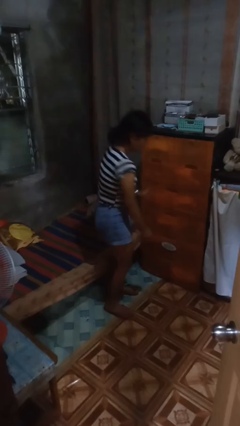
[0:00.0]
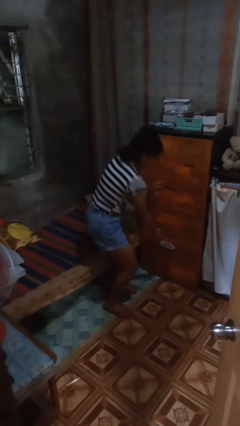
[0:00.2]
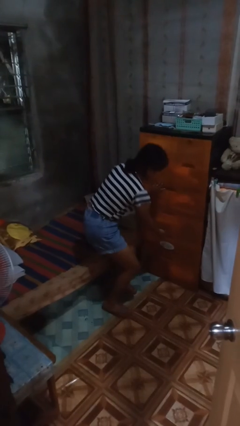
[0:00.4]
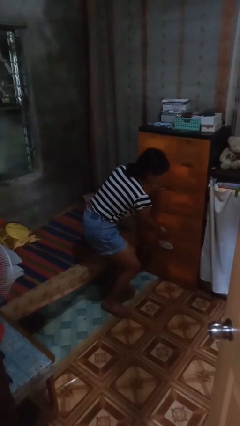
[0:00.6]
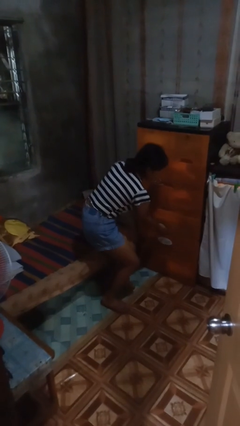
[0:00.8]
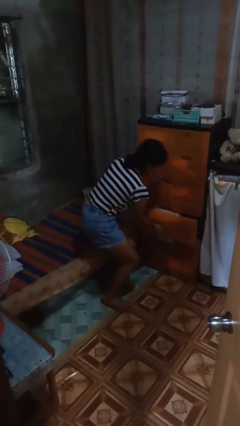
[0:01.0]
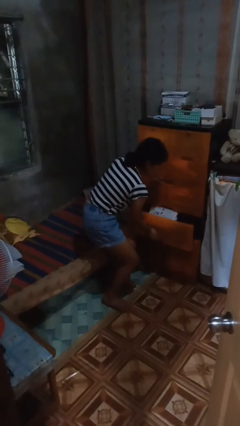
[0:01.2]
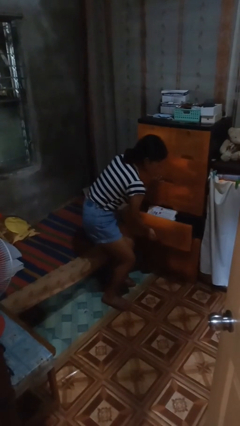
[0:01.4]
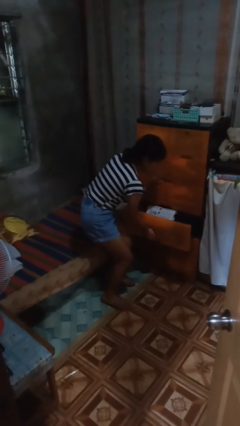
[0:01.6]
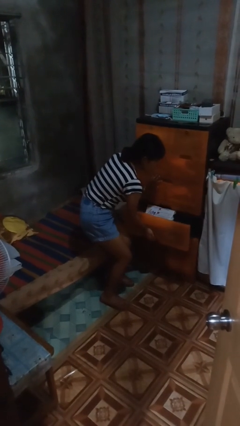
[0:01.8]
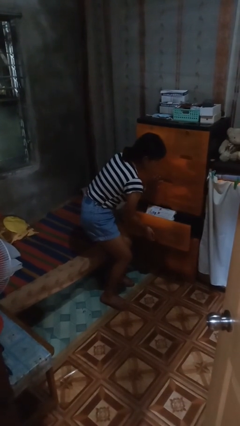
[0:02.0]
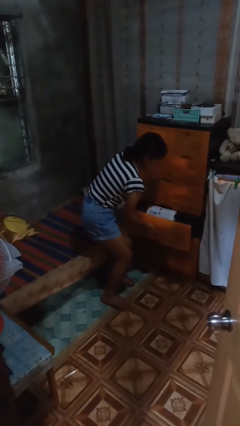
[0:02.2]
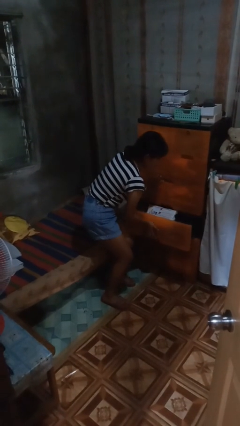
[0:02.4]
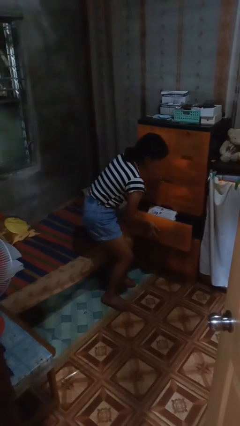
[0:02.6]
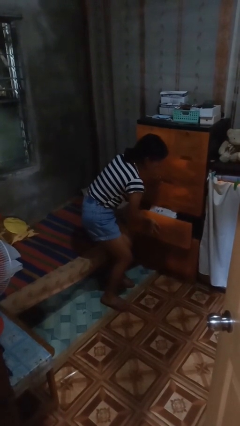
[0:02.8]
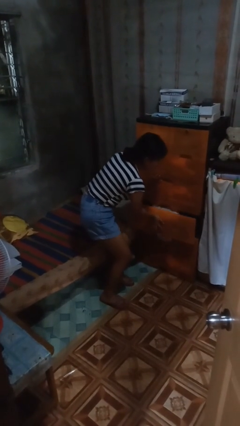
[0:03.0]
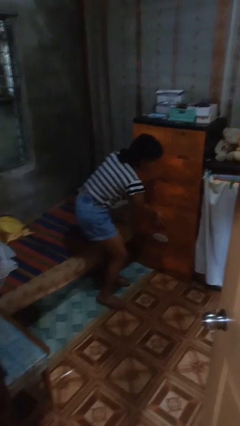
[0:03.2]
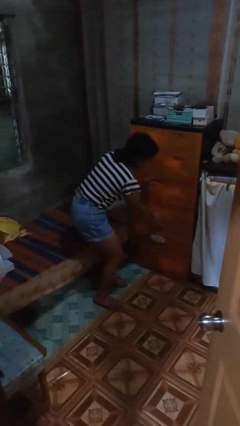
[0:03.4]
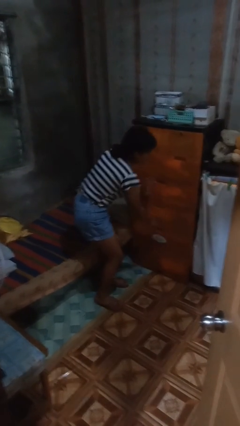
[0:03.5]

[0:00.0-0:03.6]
person opens dresser drawer

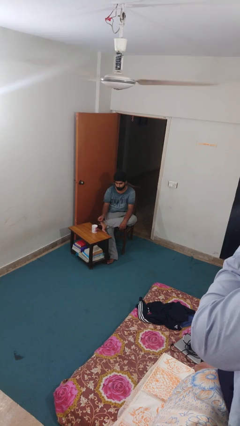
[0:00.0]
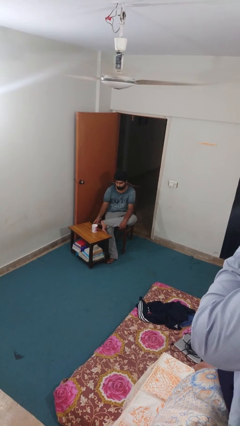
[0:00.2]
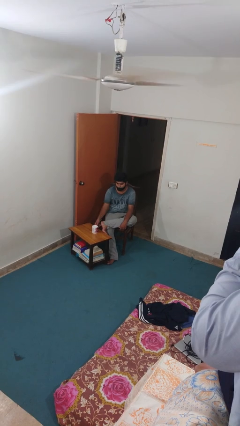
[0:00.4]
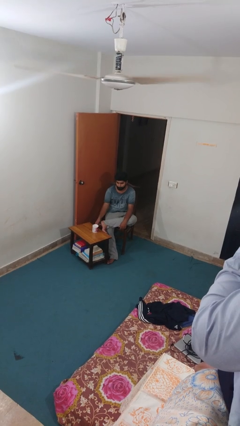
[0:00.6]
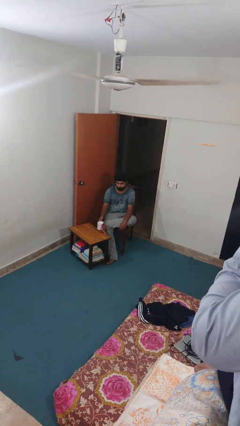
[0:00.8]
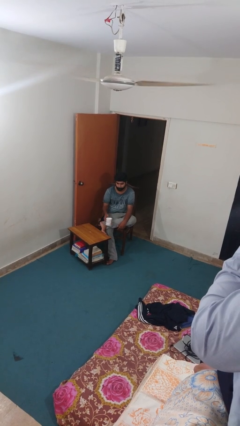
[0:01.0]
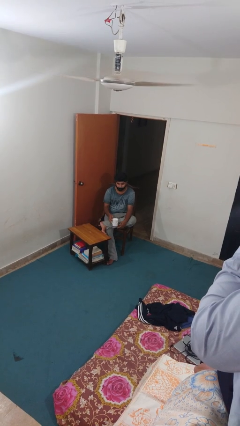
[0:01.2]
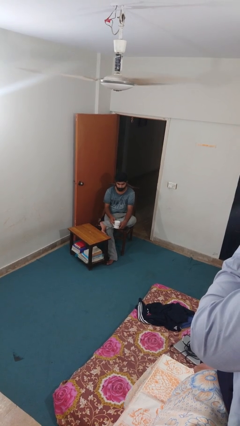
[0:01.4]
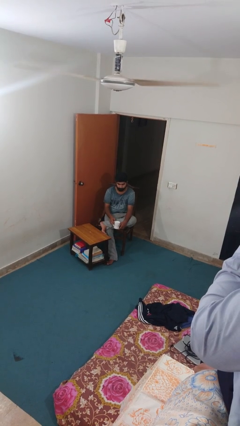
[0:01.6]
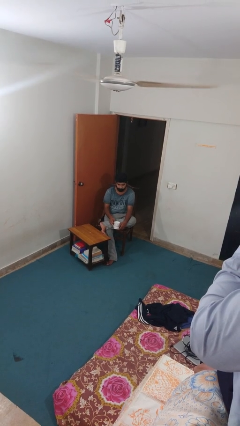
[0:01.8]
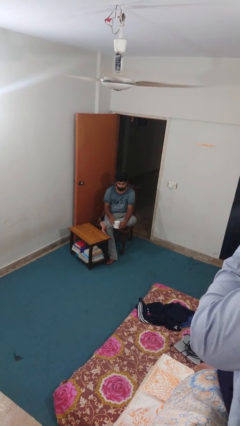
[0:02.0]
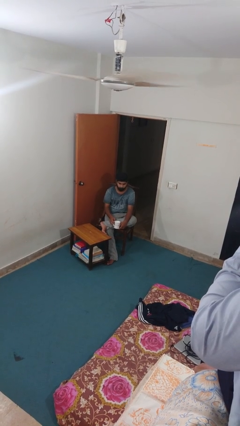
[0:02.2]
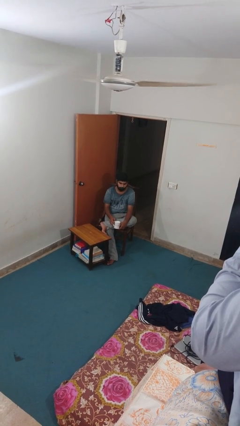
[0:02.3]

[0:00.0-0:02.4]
person picks up object from table

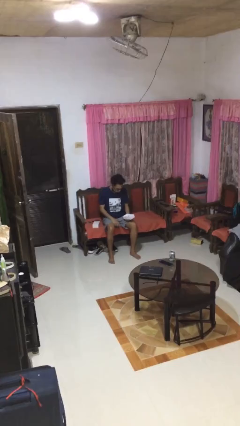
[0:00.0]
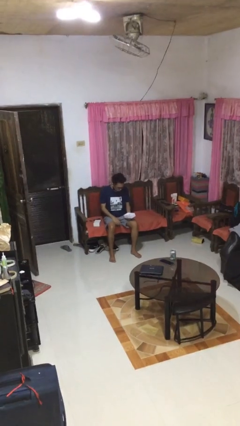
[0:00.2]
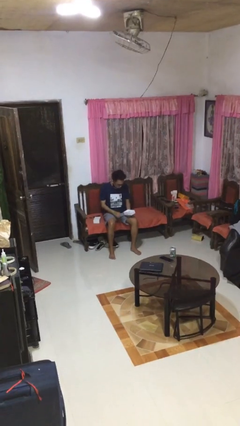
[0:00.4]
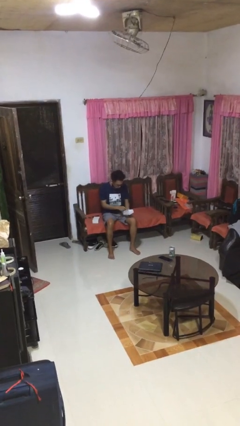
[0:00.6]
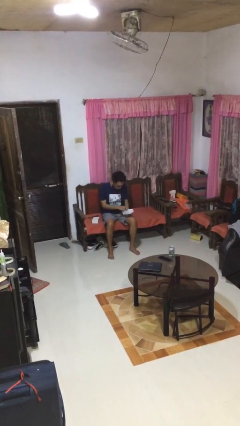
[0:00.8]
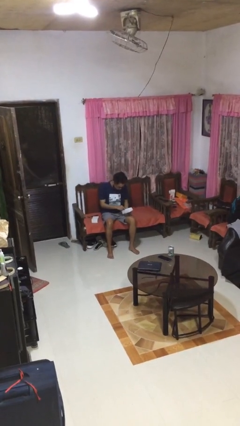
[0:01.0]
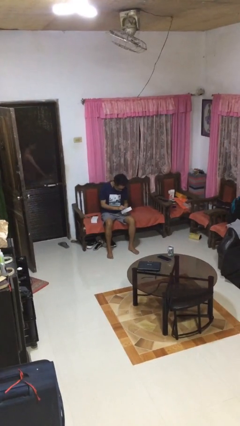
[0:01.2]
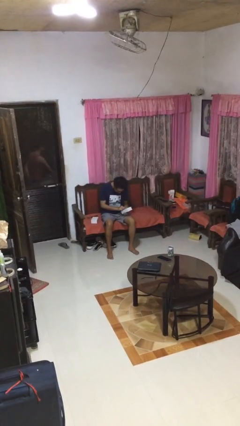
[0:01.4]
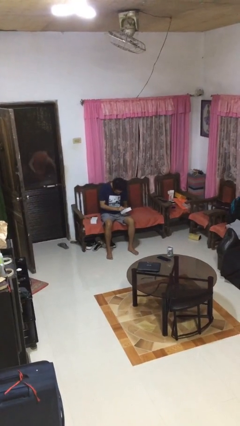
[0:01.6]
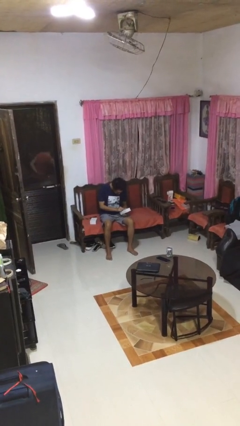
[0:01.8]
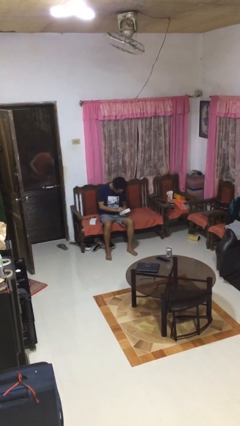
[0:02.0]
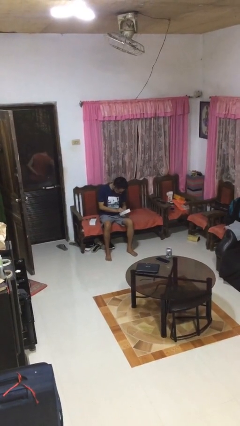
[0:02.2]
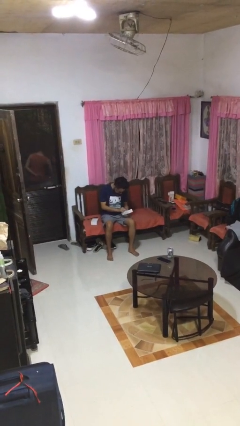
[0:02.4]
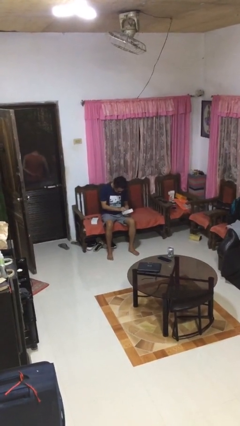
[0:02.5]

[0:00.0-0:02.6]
person searches jewelry box

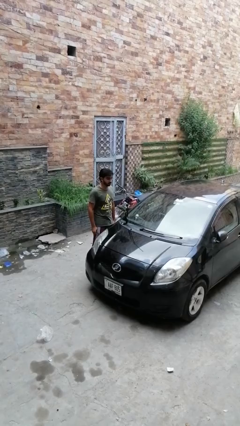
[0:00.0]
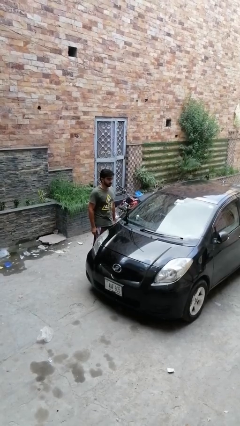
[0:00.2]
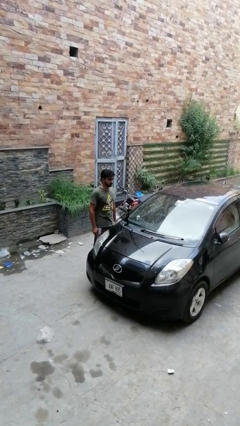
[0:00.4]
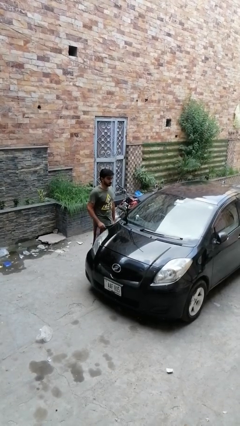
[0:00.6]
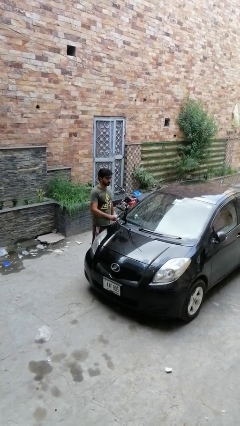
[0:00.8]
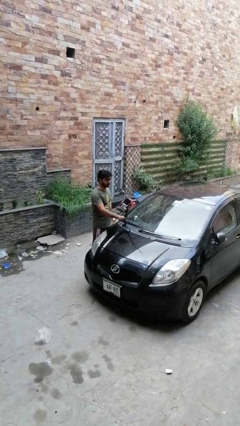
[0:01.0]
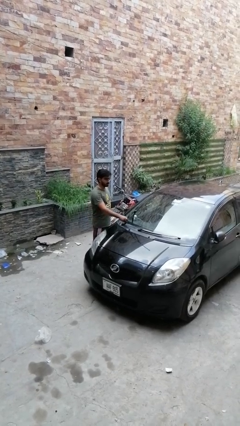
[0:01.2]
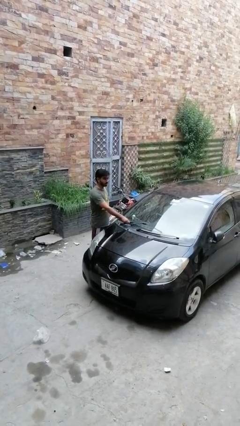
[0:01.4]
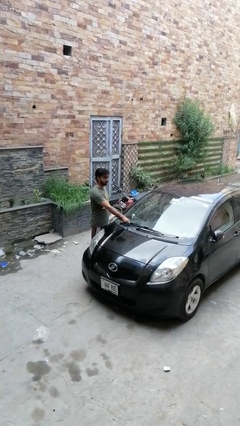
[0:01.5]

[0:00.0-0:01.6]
person flips down car wipers

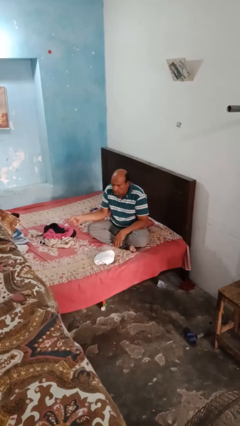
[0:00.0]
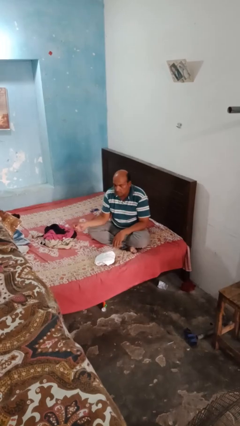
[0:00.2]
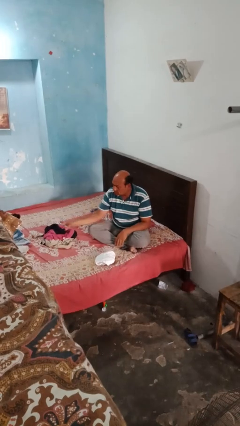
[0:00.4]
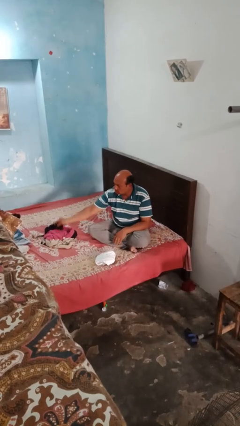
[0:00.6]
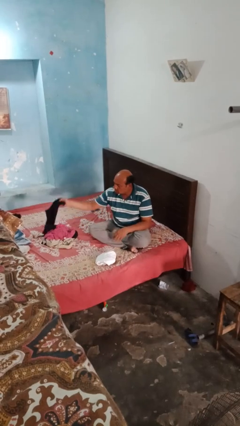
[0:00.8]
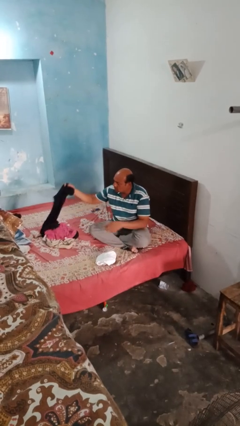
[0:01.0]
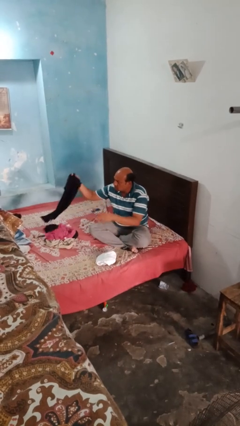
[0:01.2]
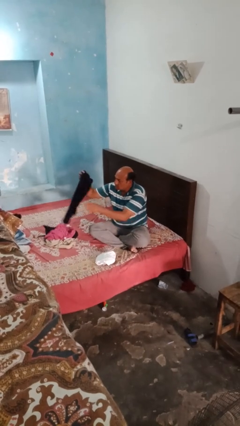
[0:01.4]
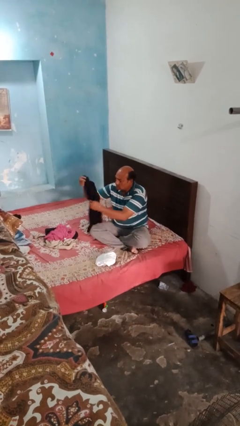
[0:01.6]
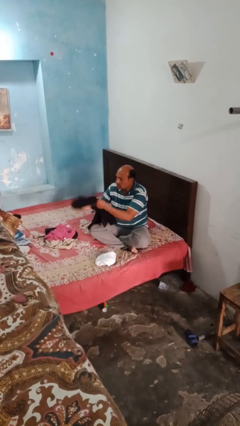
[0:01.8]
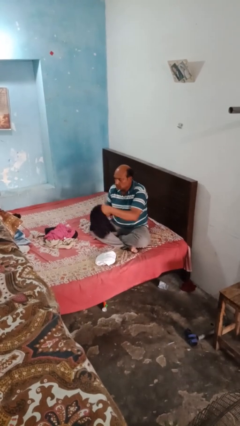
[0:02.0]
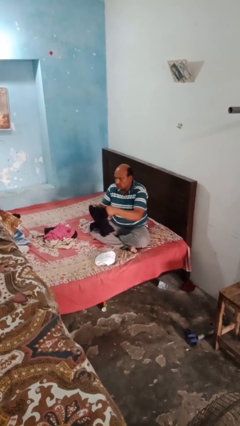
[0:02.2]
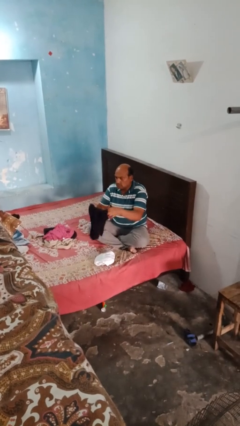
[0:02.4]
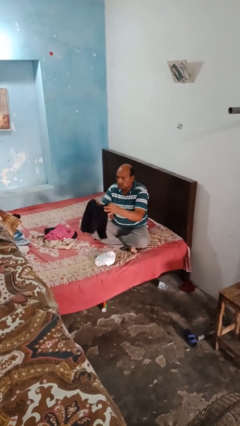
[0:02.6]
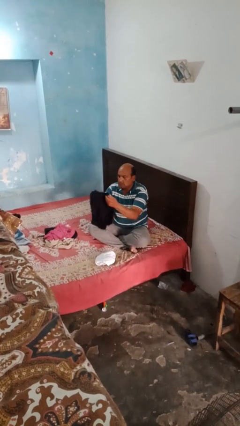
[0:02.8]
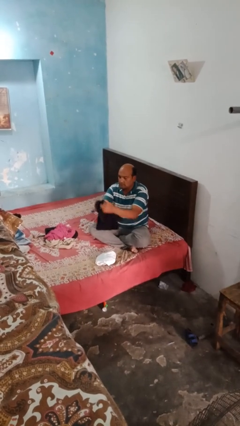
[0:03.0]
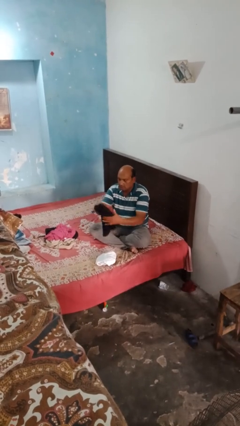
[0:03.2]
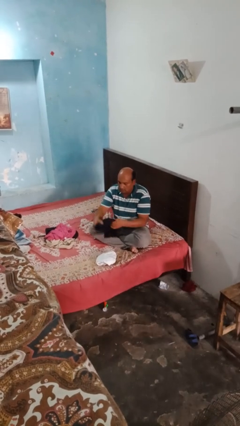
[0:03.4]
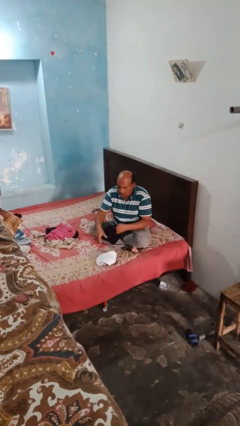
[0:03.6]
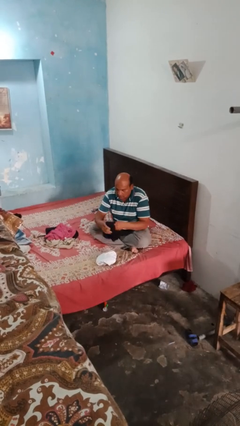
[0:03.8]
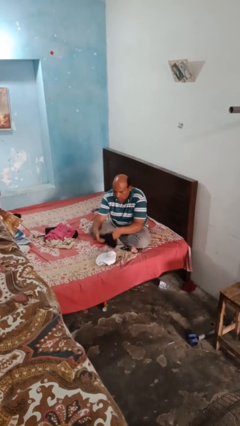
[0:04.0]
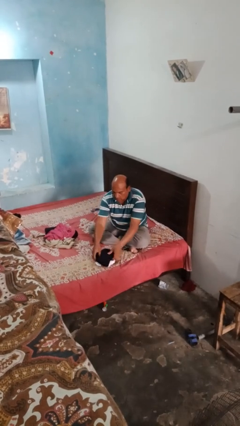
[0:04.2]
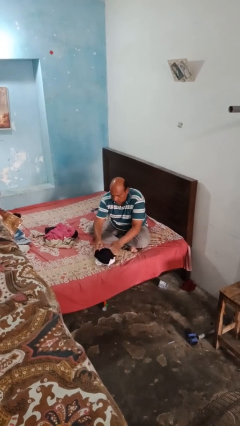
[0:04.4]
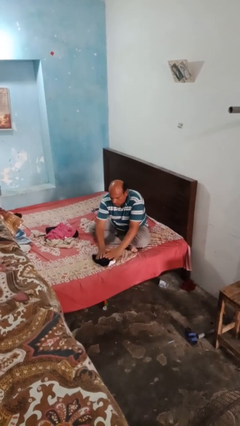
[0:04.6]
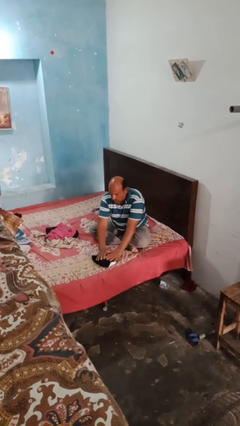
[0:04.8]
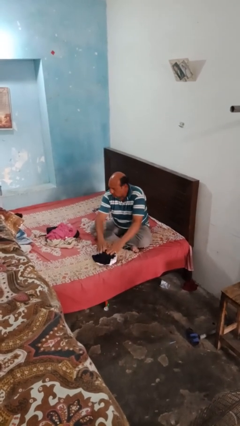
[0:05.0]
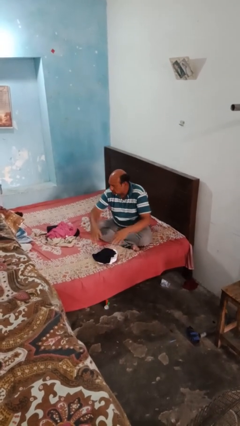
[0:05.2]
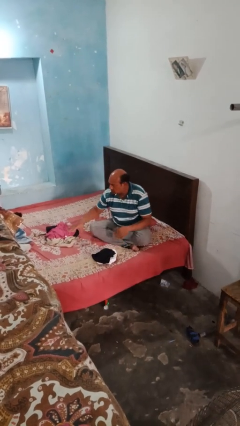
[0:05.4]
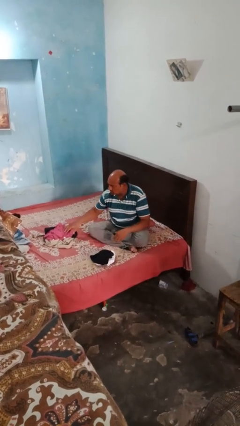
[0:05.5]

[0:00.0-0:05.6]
person folds shirt

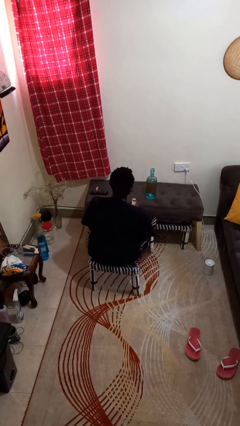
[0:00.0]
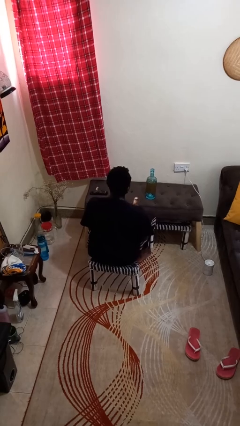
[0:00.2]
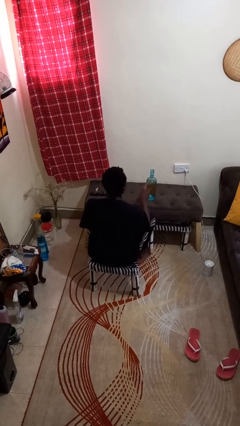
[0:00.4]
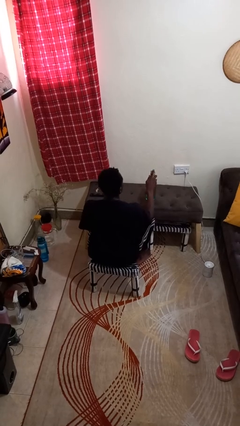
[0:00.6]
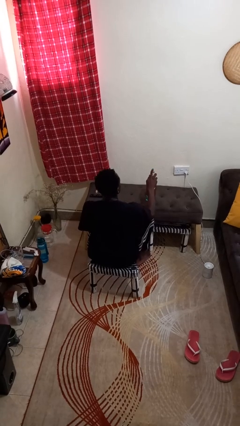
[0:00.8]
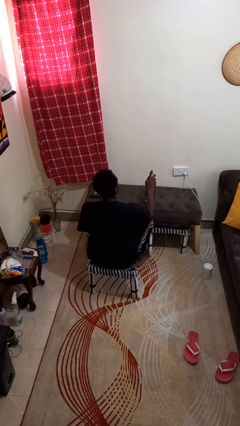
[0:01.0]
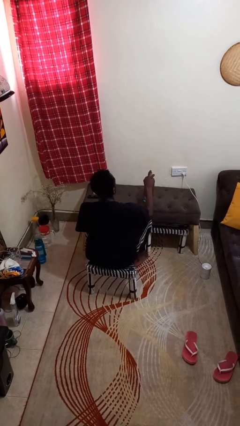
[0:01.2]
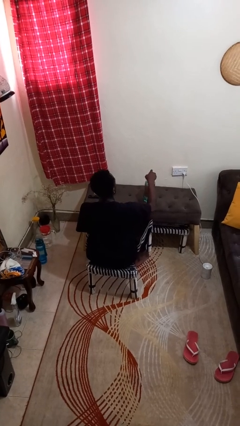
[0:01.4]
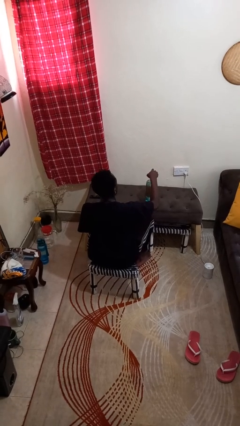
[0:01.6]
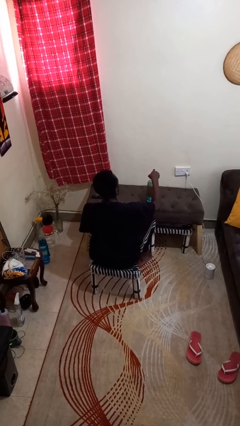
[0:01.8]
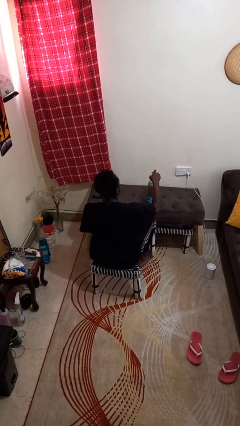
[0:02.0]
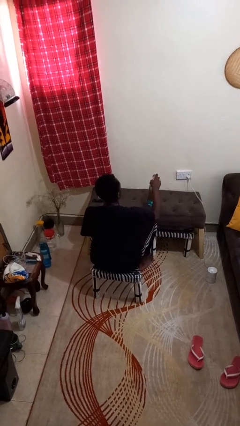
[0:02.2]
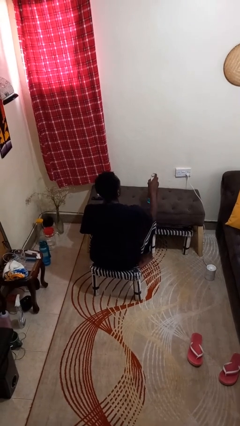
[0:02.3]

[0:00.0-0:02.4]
person opens can with can opener
